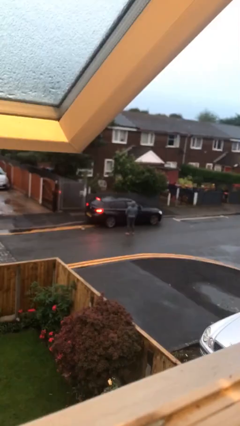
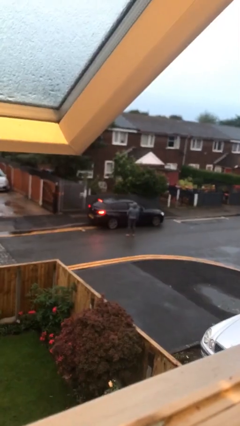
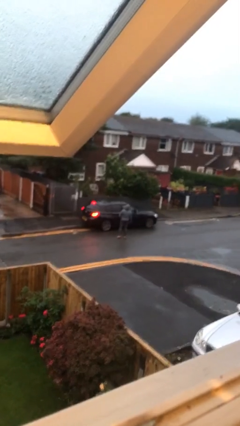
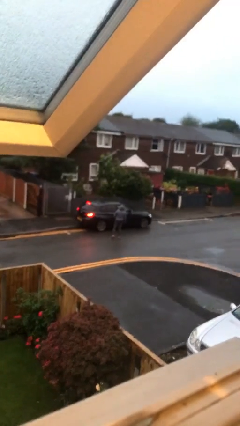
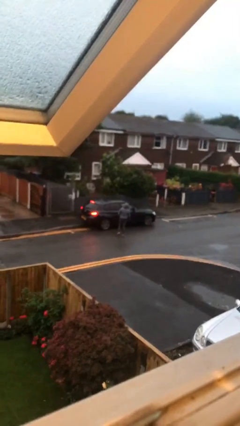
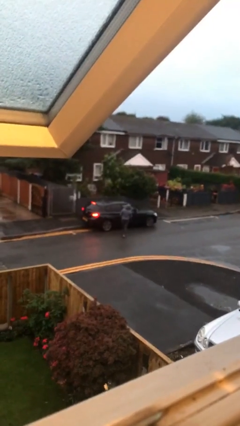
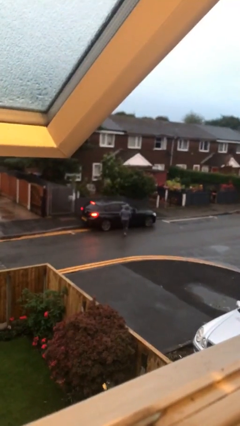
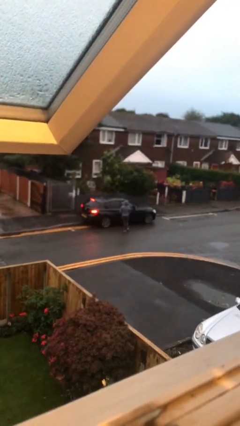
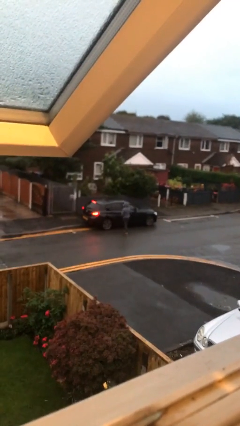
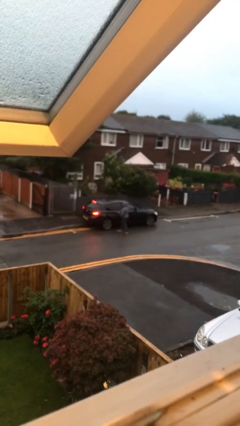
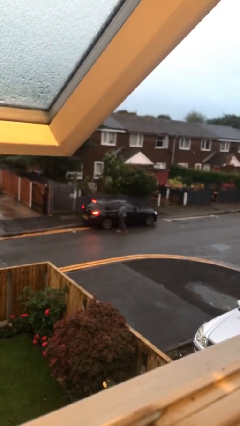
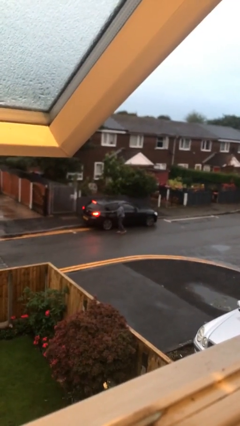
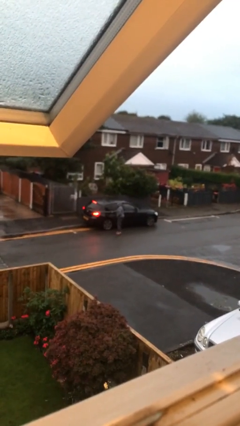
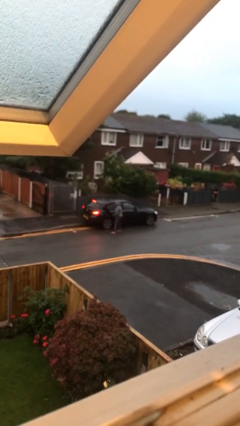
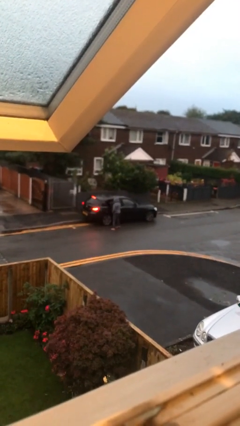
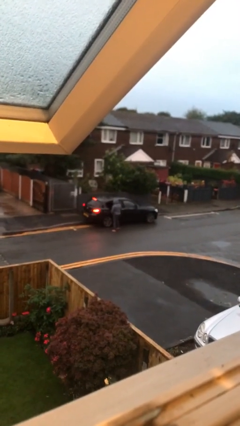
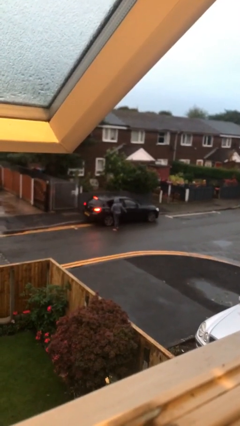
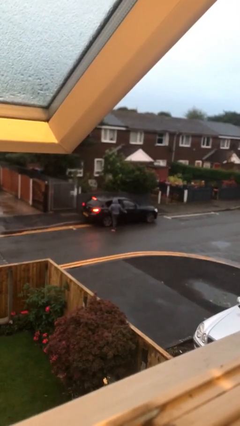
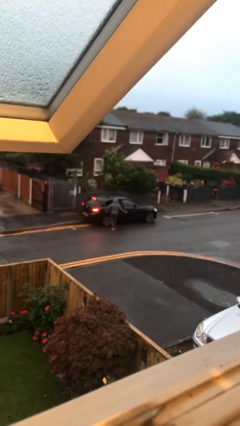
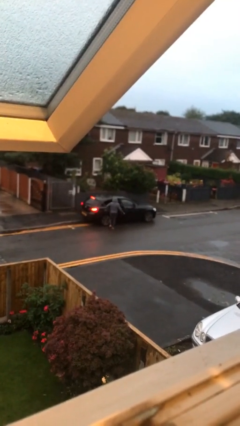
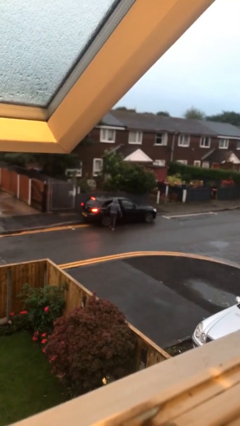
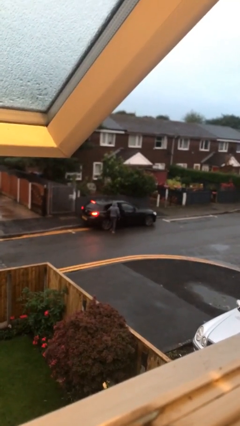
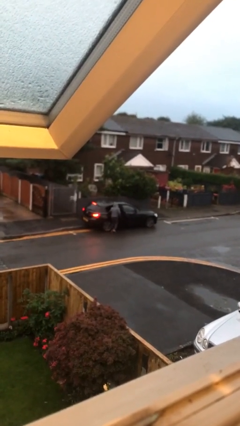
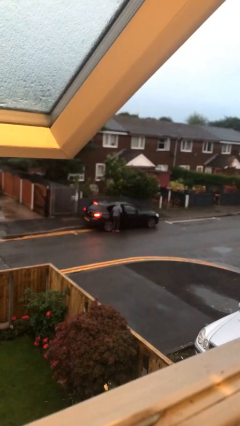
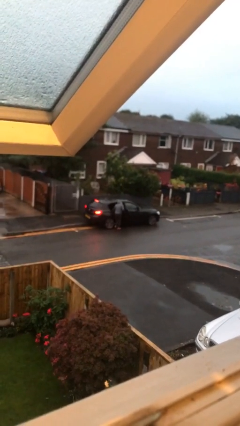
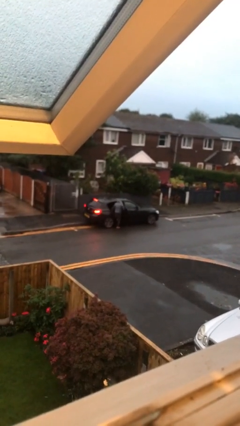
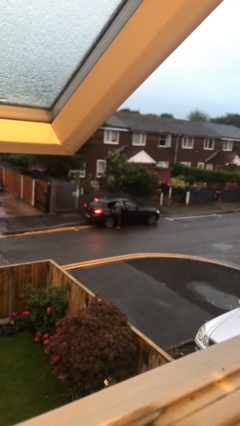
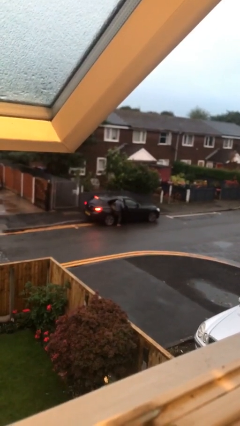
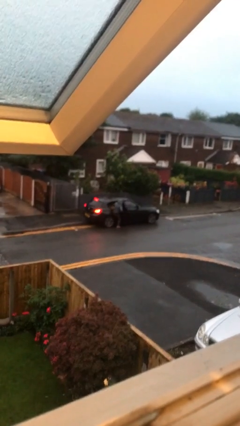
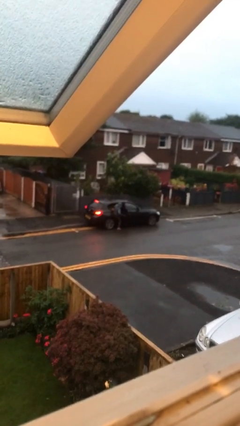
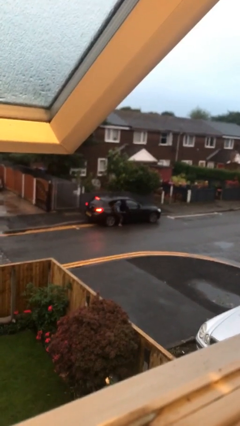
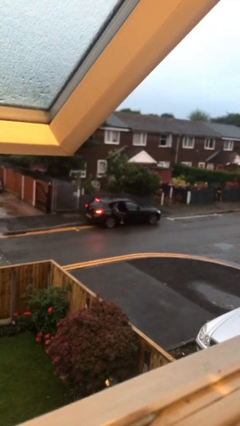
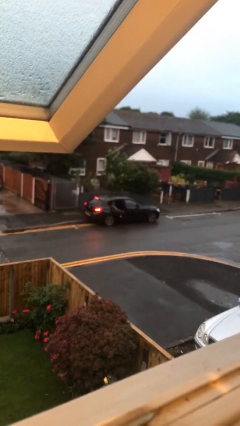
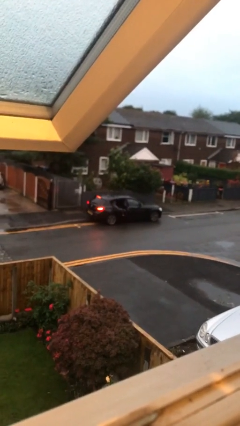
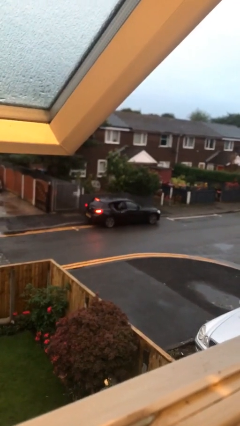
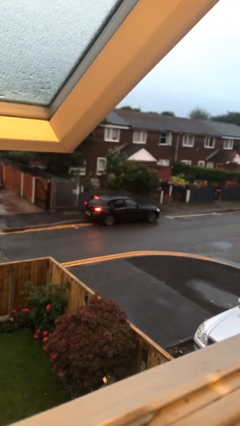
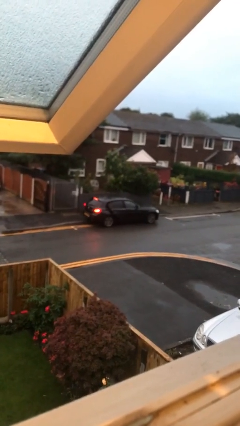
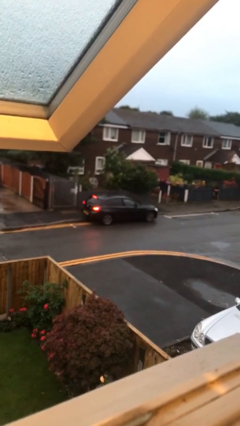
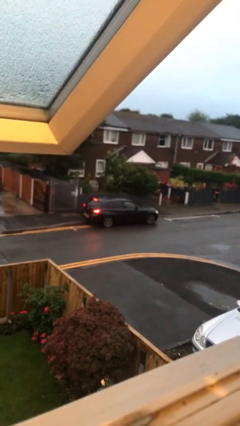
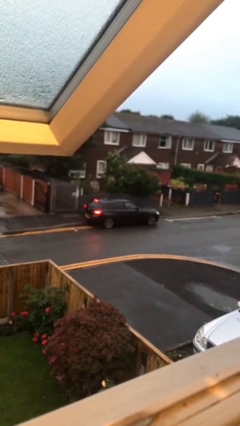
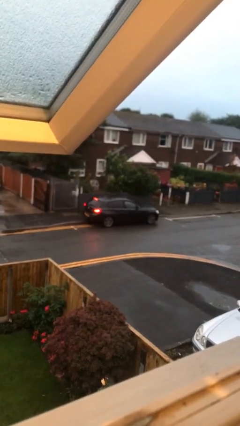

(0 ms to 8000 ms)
car picks up person

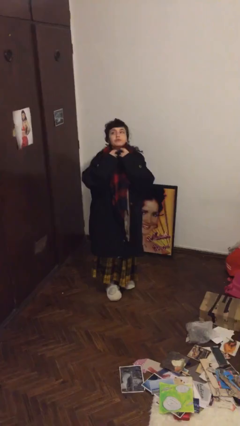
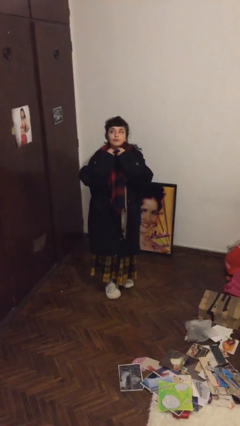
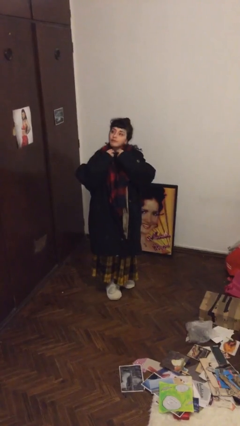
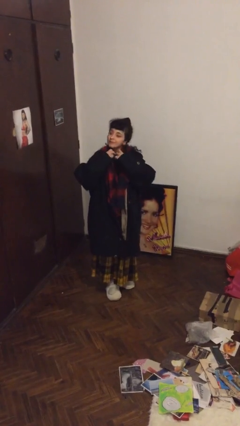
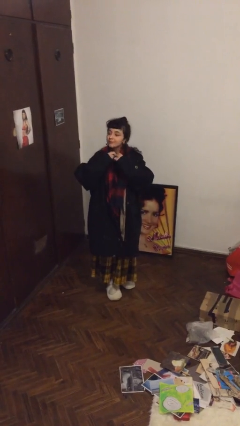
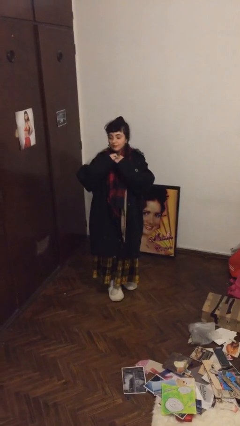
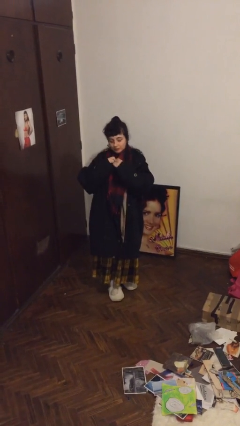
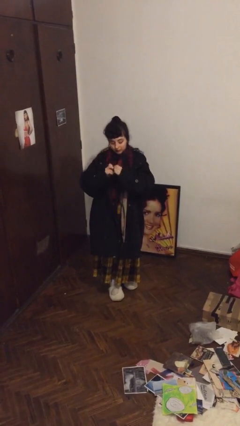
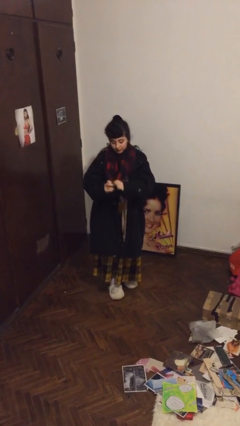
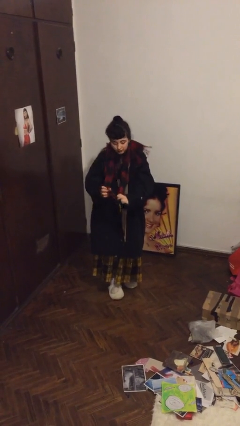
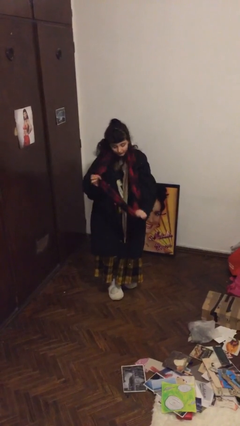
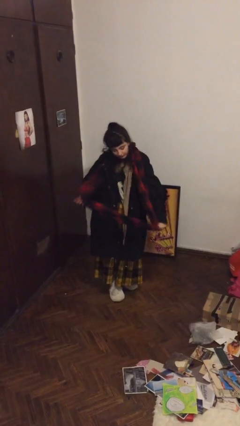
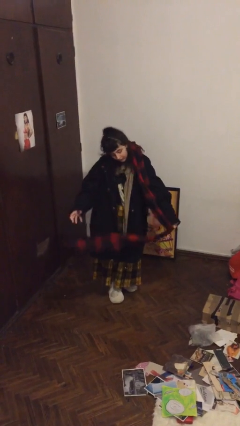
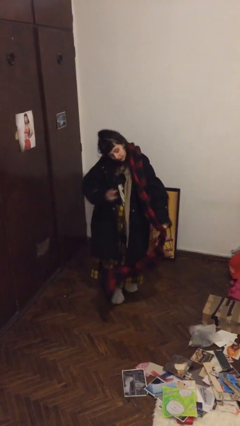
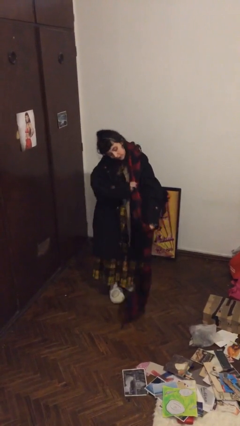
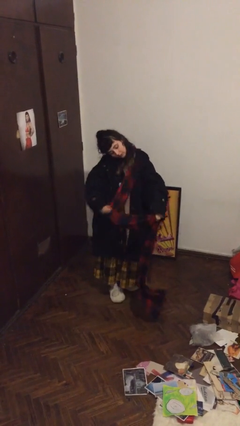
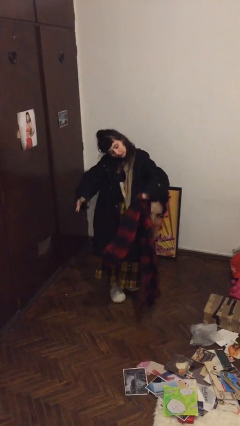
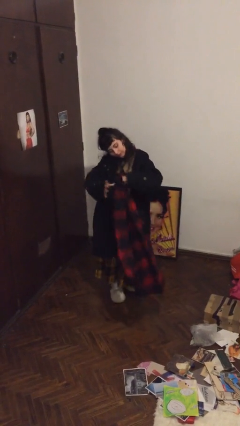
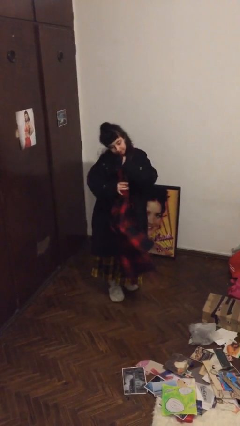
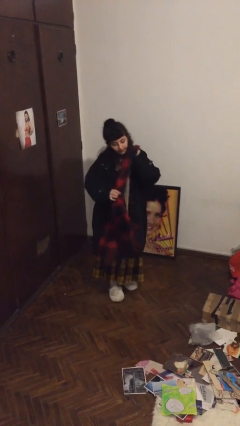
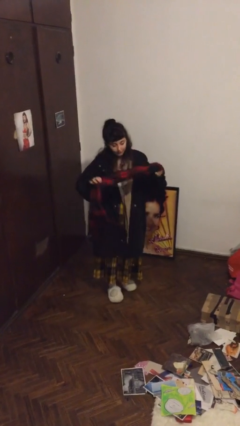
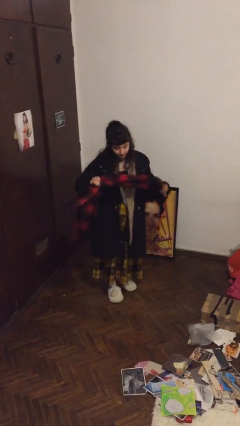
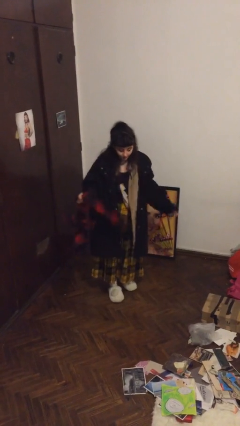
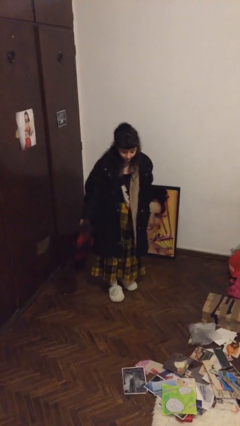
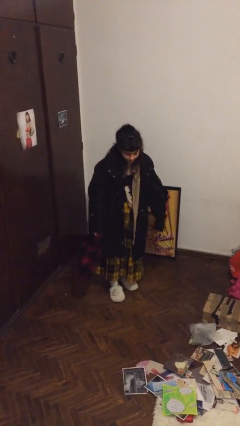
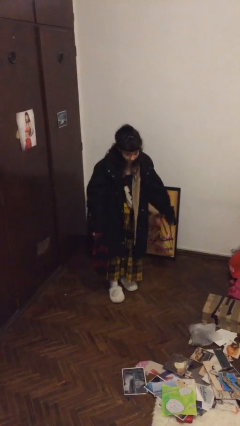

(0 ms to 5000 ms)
person takes off scarf

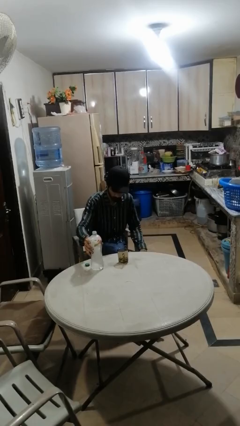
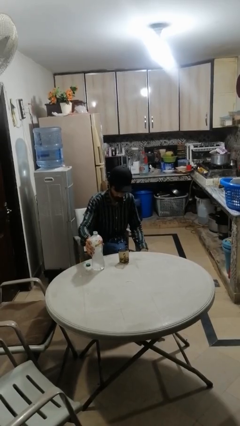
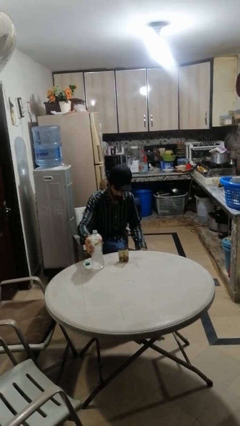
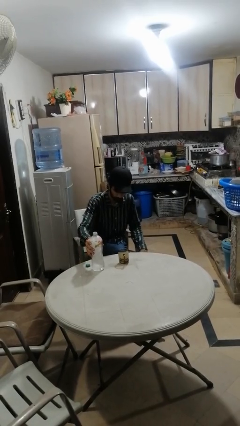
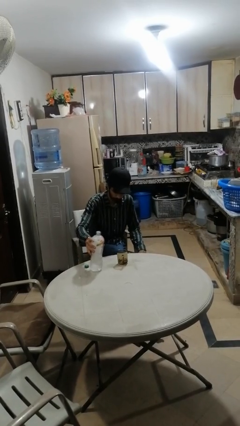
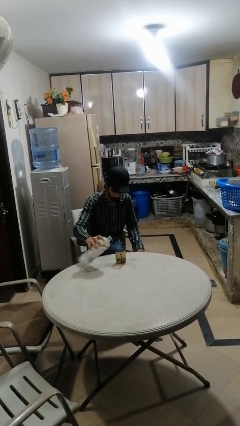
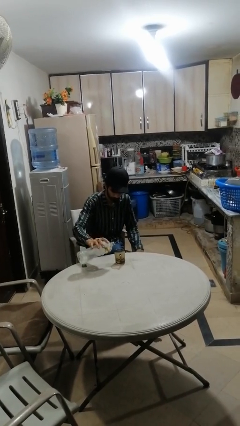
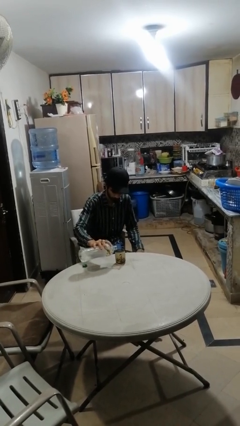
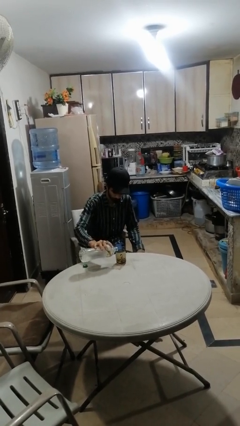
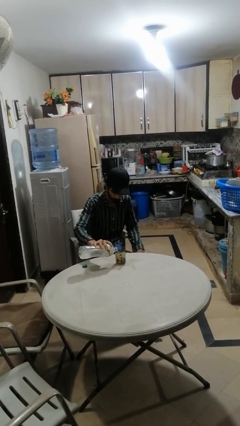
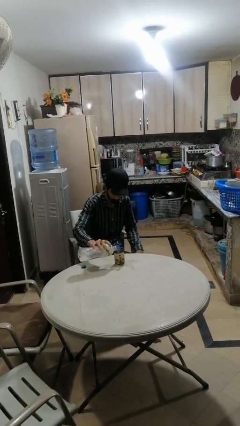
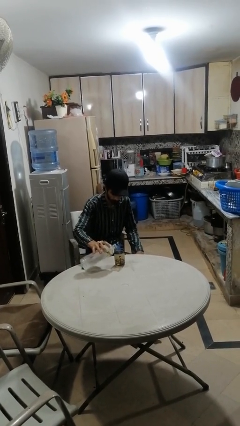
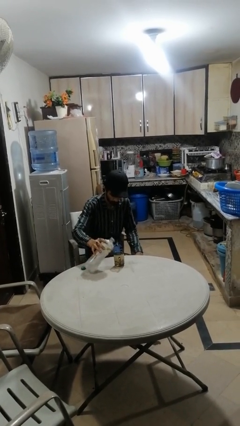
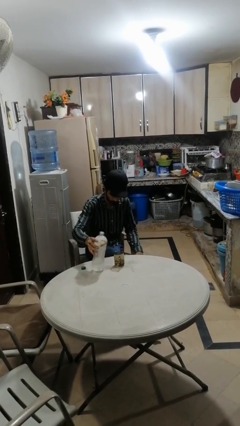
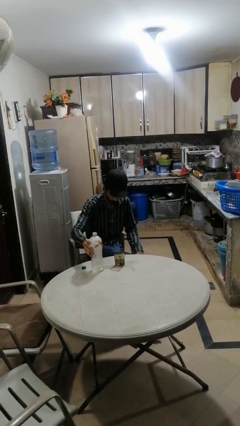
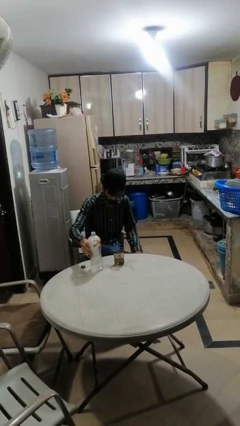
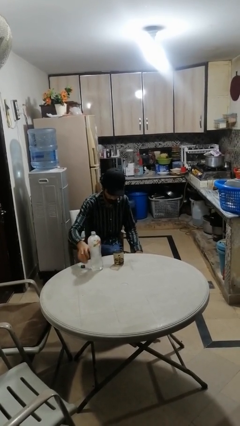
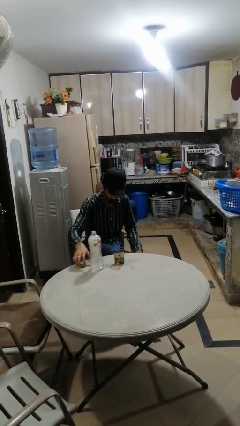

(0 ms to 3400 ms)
person pours liquid into cup

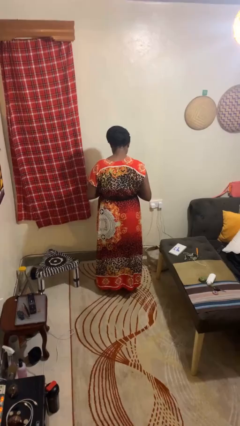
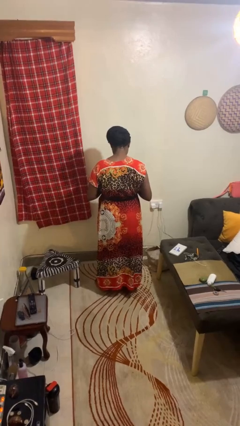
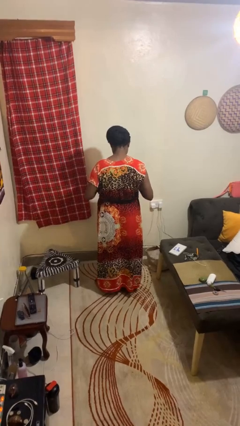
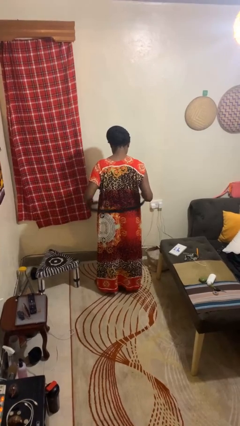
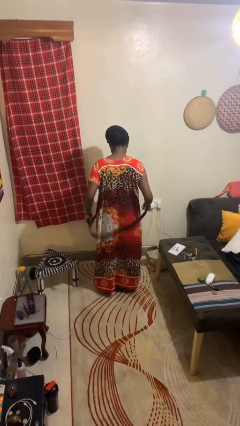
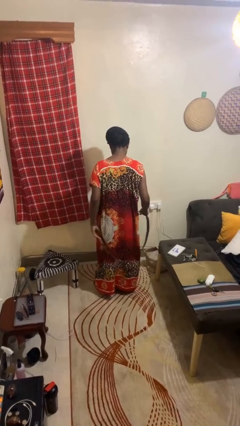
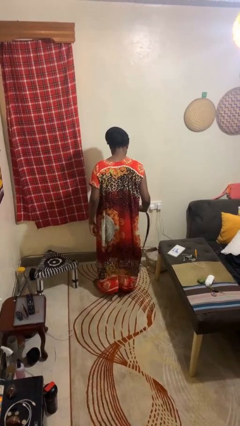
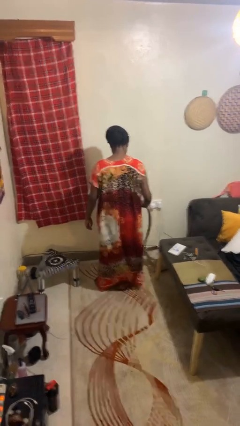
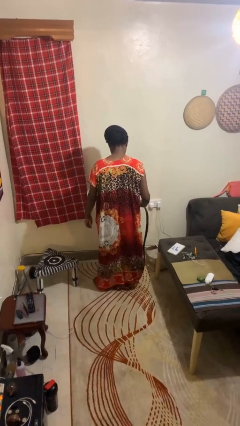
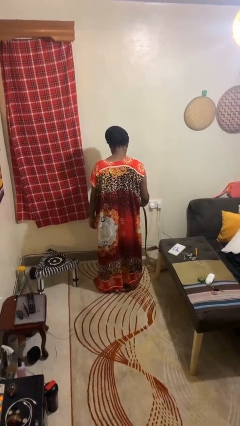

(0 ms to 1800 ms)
person takes off belt
